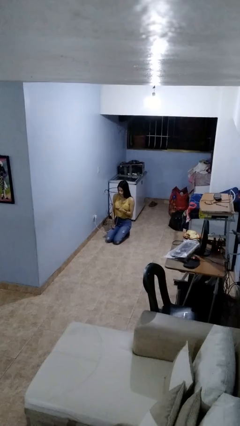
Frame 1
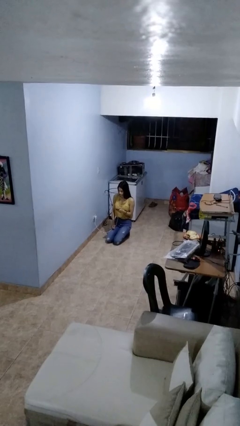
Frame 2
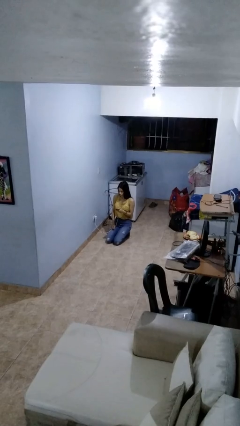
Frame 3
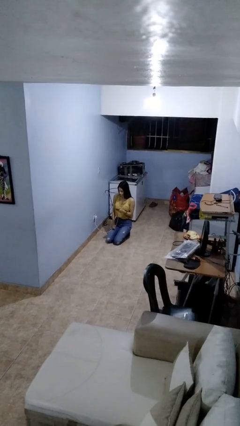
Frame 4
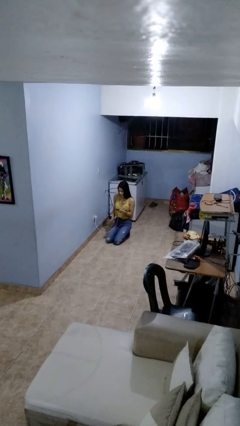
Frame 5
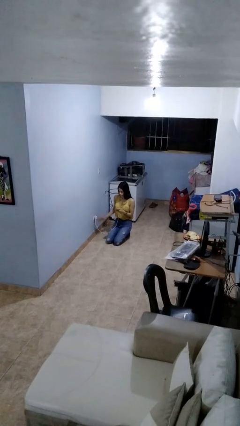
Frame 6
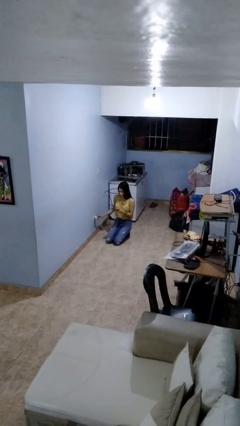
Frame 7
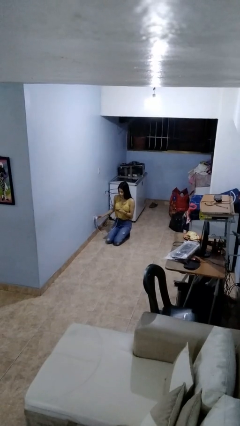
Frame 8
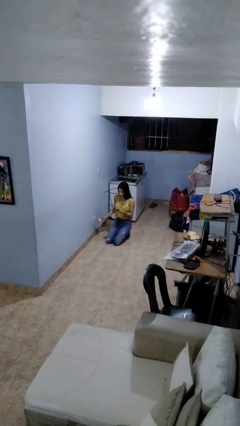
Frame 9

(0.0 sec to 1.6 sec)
person unplugs from electrical socket

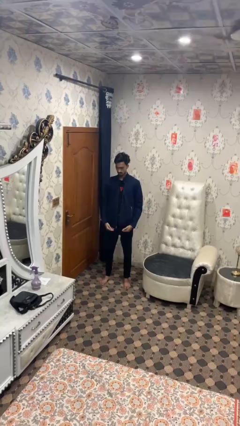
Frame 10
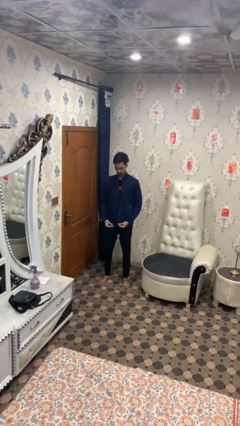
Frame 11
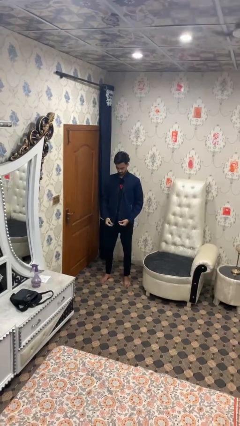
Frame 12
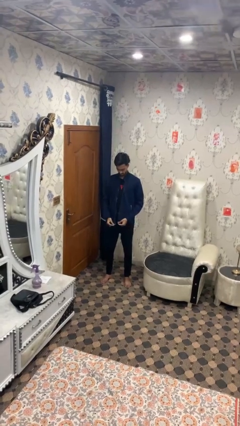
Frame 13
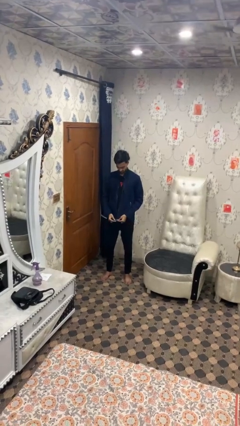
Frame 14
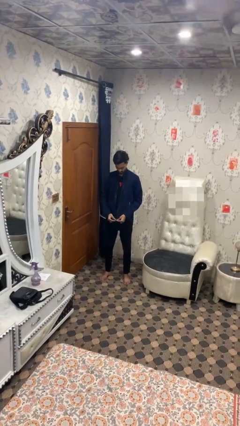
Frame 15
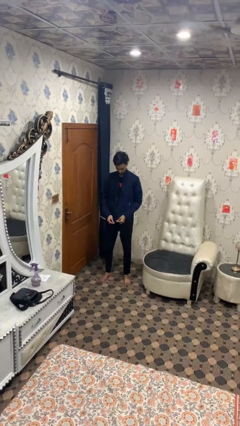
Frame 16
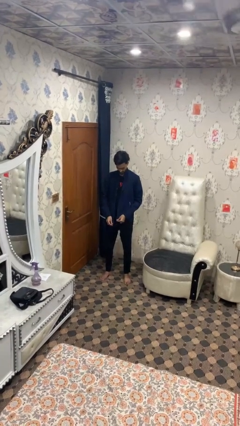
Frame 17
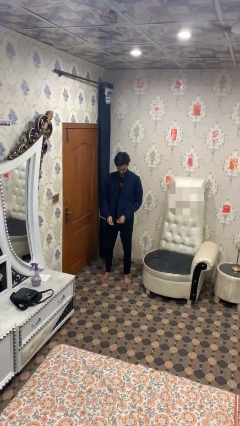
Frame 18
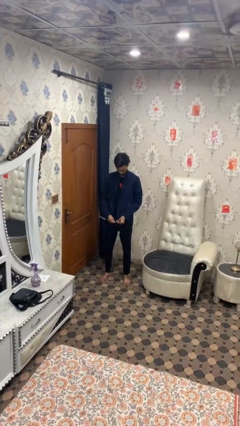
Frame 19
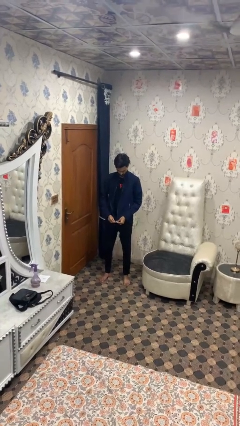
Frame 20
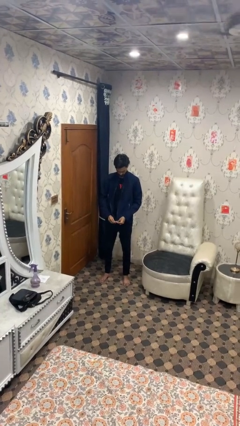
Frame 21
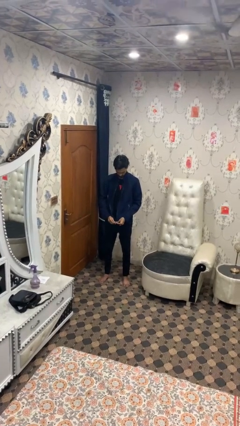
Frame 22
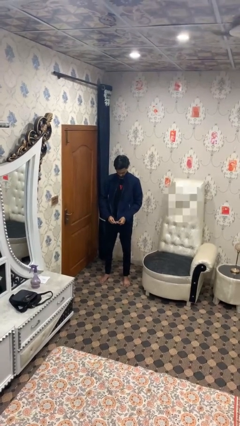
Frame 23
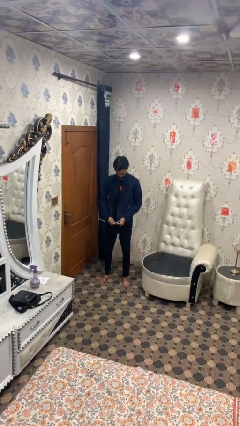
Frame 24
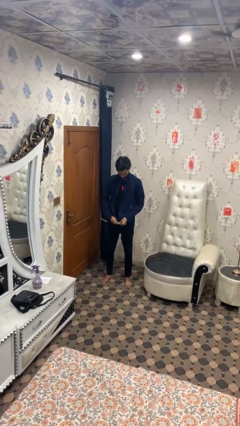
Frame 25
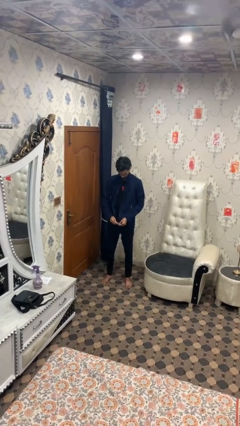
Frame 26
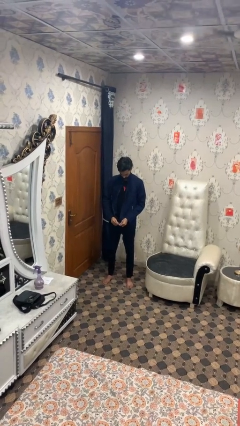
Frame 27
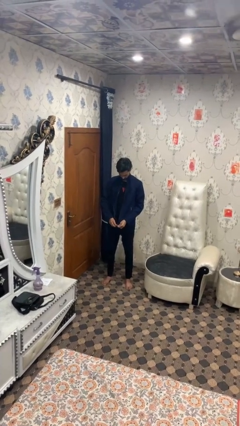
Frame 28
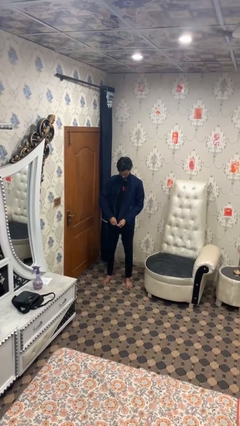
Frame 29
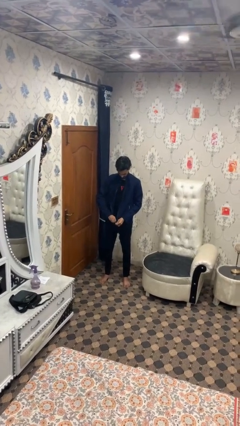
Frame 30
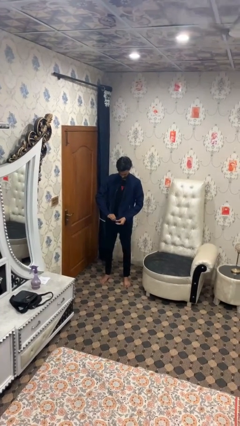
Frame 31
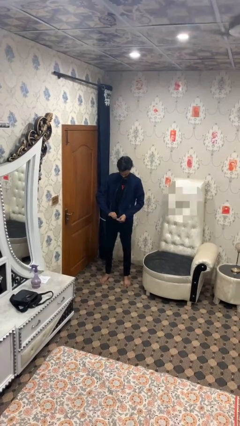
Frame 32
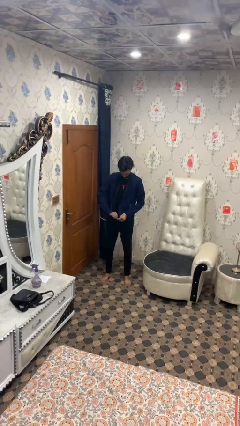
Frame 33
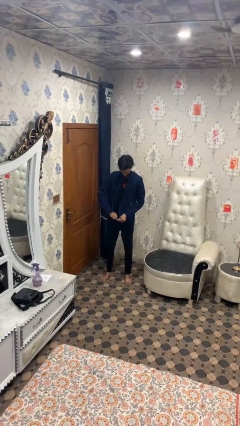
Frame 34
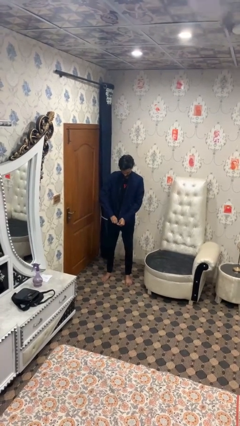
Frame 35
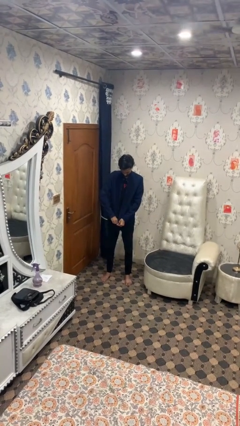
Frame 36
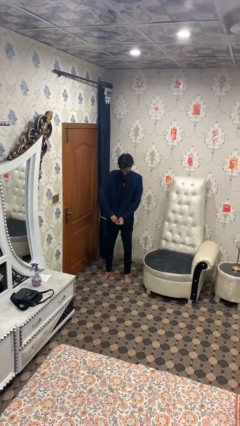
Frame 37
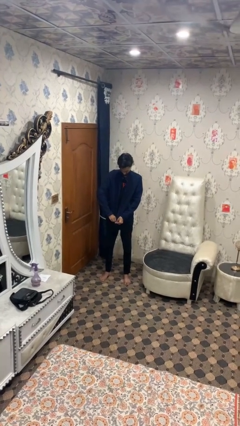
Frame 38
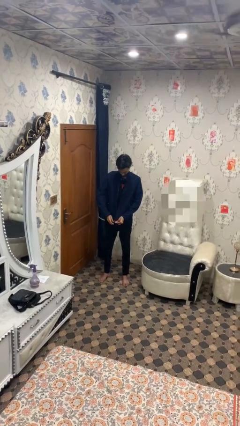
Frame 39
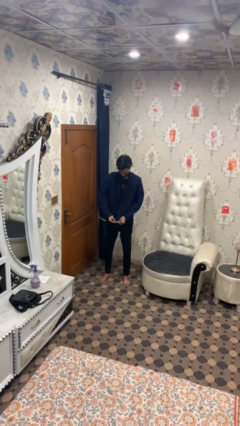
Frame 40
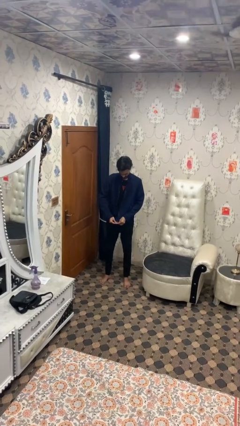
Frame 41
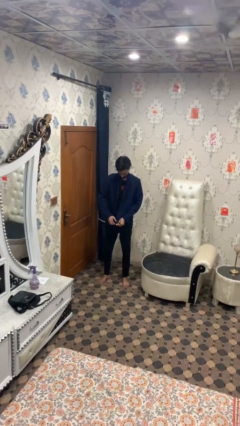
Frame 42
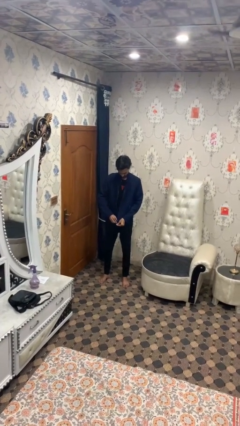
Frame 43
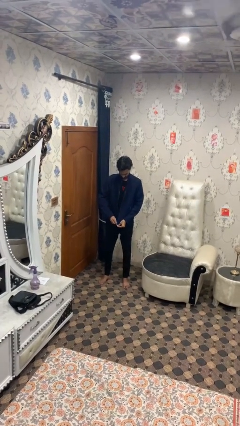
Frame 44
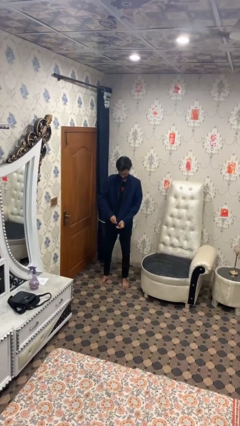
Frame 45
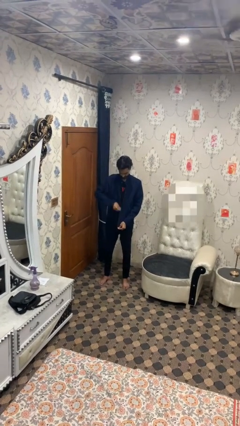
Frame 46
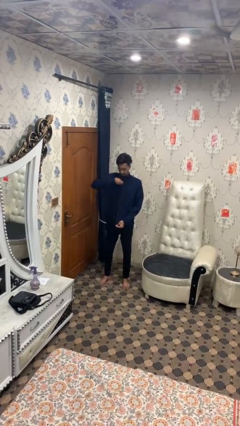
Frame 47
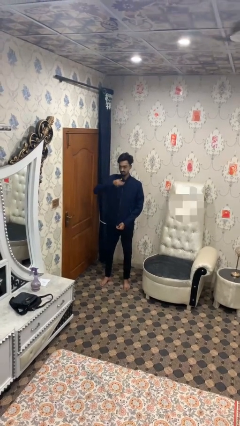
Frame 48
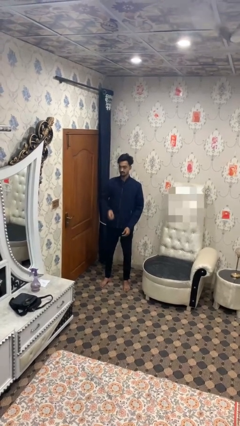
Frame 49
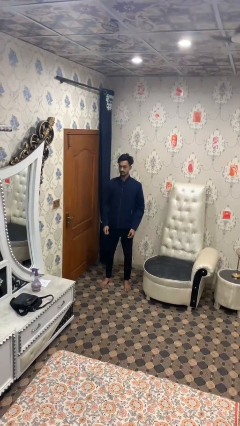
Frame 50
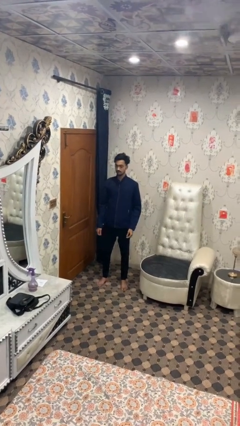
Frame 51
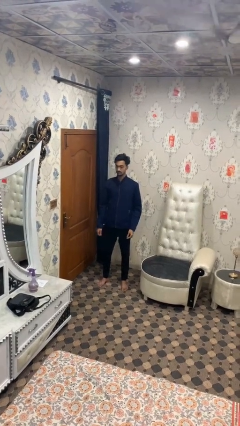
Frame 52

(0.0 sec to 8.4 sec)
person zips up jacket

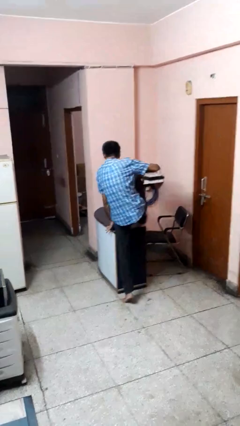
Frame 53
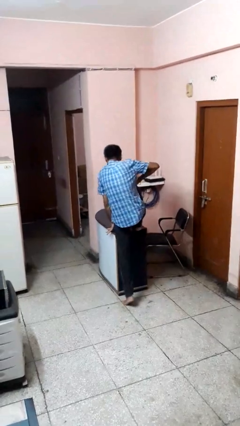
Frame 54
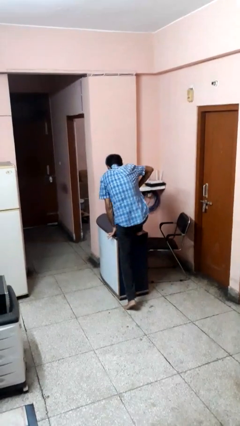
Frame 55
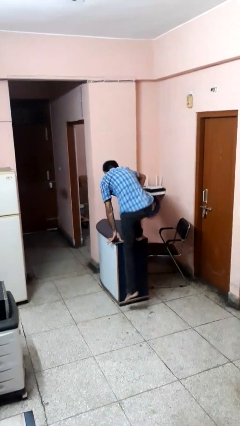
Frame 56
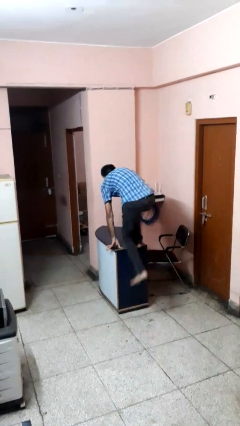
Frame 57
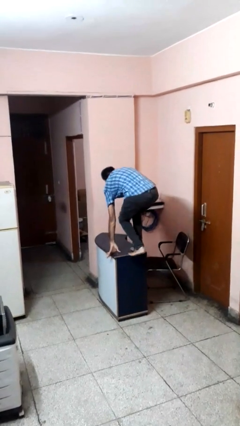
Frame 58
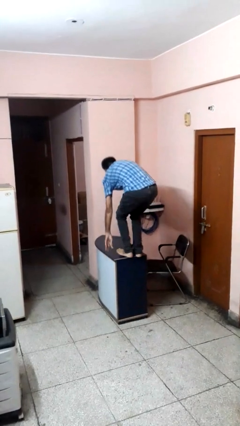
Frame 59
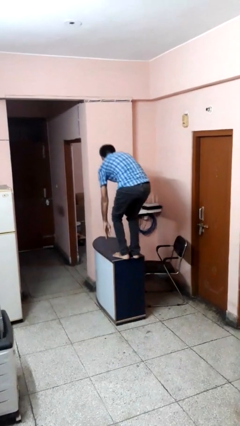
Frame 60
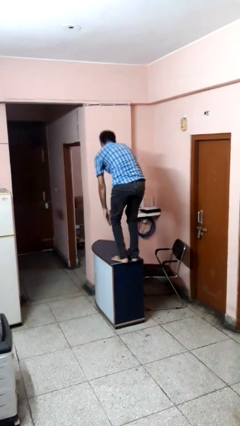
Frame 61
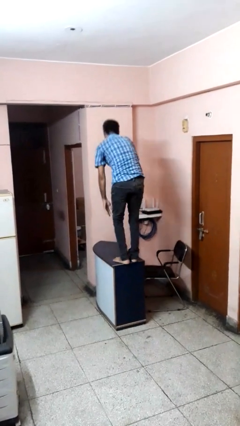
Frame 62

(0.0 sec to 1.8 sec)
person climbs on table

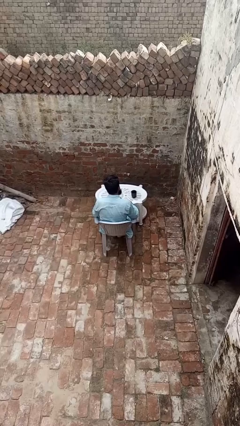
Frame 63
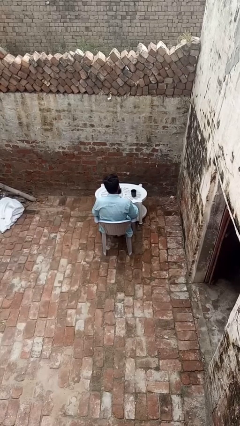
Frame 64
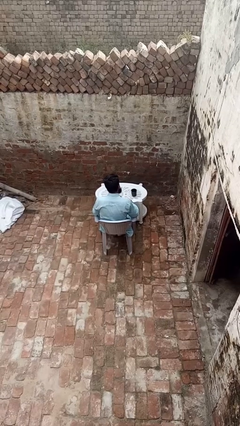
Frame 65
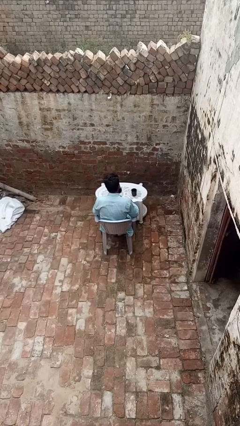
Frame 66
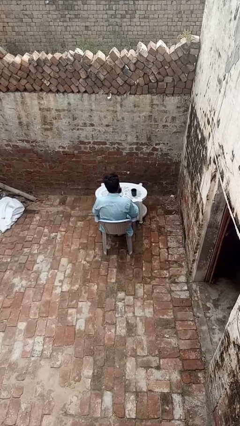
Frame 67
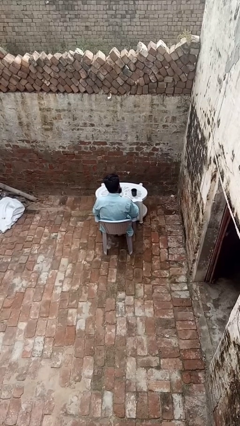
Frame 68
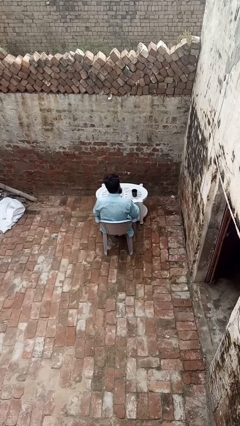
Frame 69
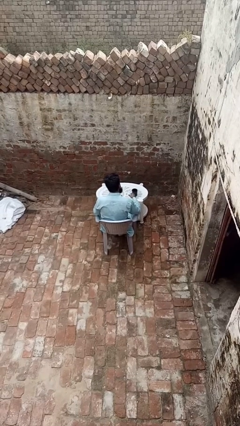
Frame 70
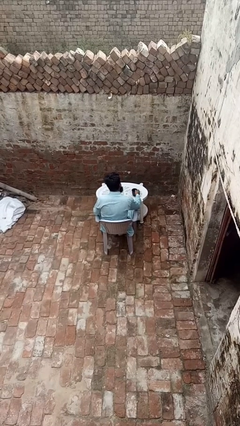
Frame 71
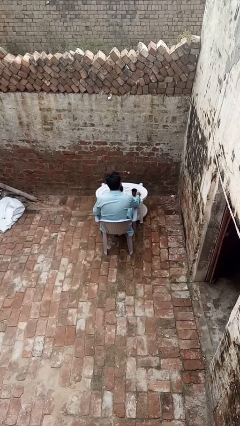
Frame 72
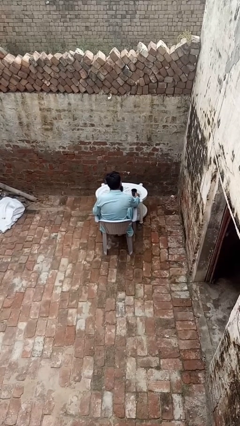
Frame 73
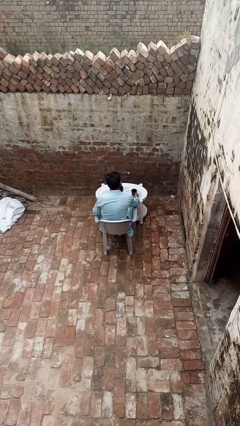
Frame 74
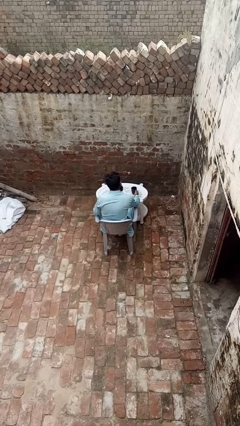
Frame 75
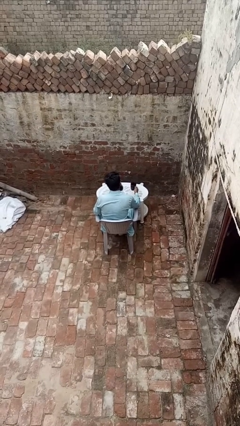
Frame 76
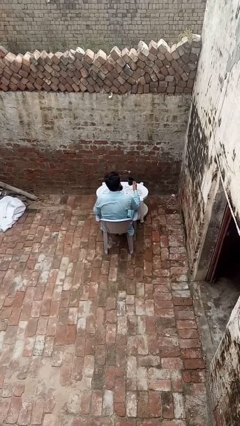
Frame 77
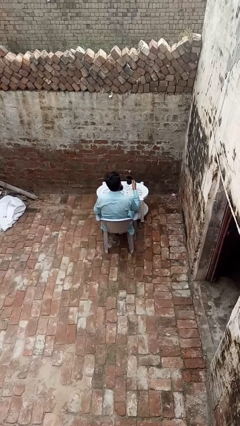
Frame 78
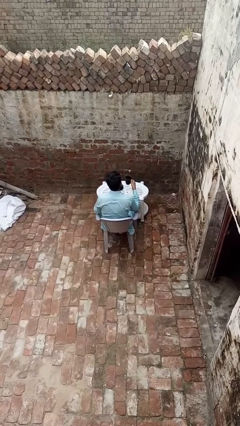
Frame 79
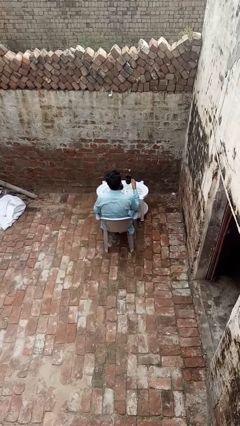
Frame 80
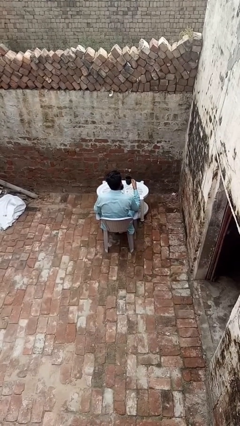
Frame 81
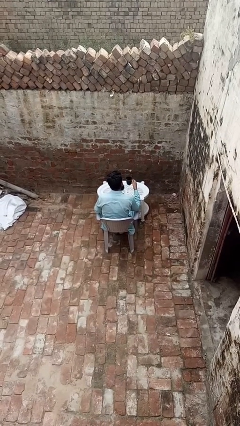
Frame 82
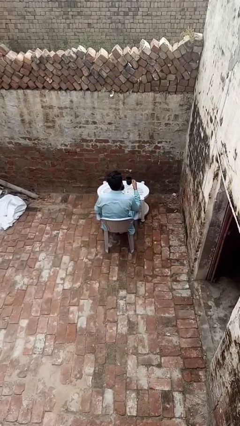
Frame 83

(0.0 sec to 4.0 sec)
person picks up object from table

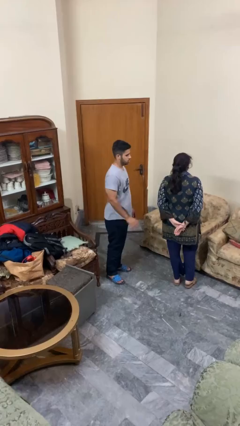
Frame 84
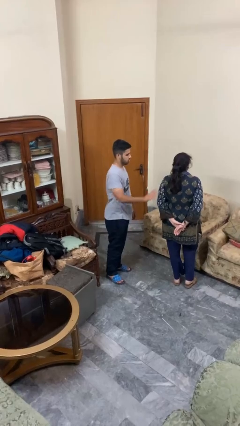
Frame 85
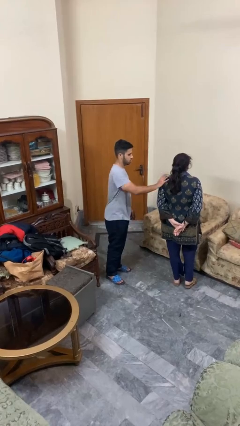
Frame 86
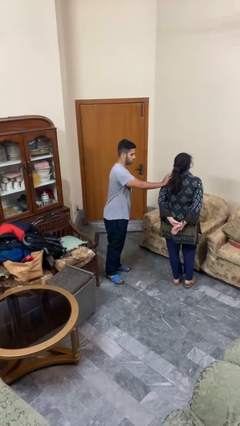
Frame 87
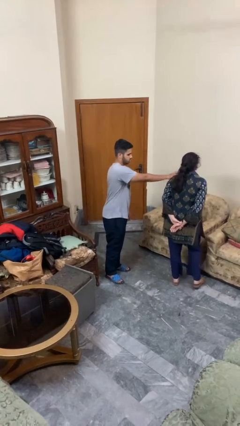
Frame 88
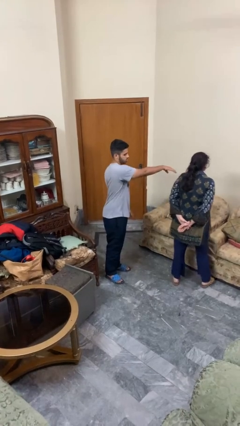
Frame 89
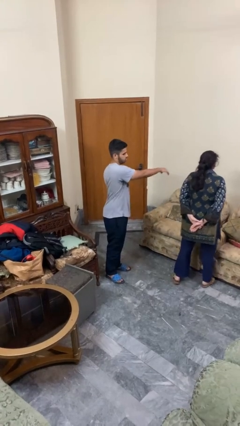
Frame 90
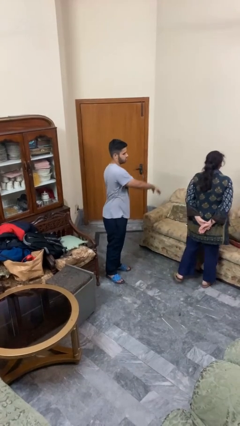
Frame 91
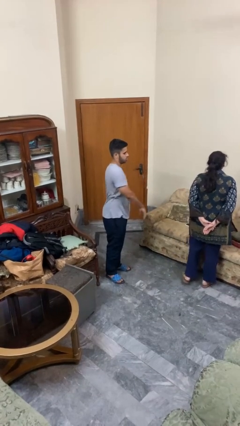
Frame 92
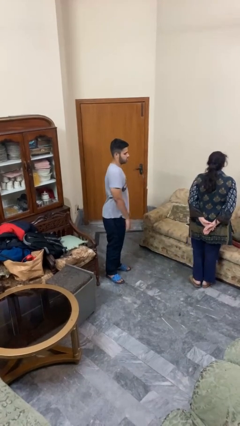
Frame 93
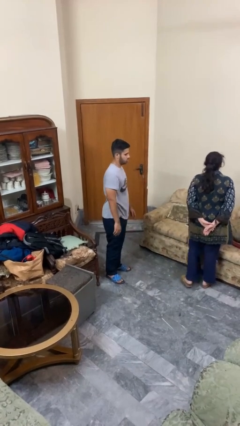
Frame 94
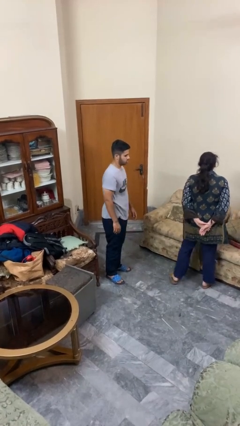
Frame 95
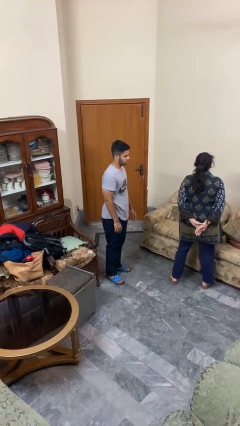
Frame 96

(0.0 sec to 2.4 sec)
person shoves person
